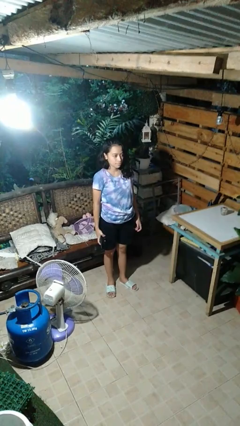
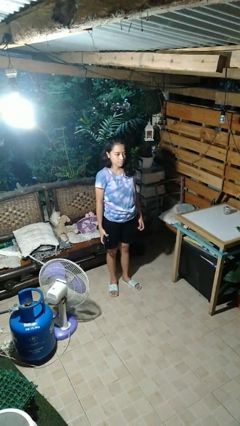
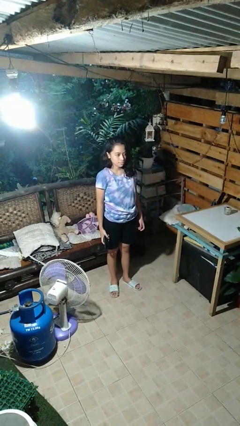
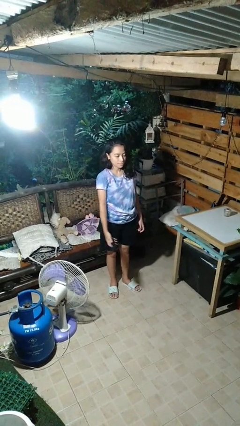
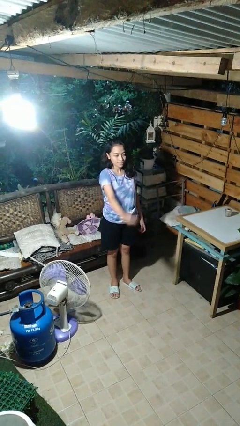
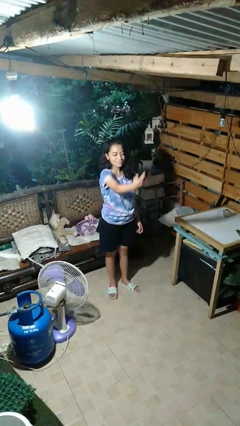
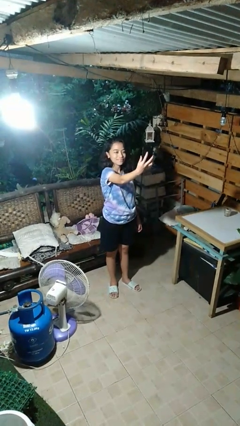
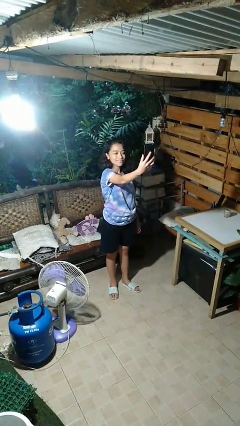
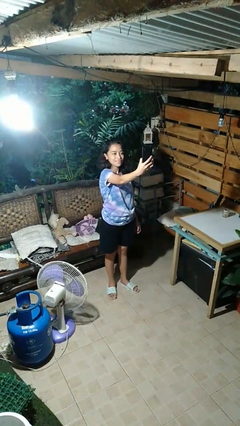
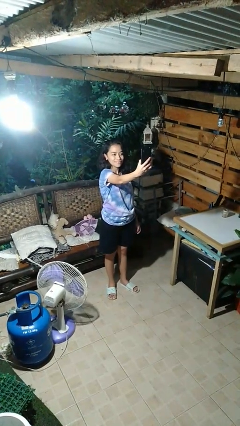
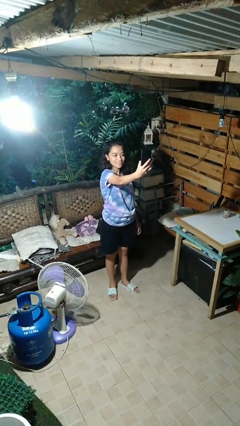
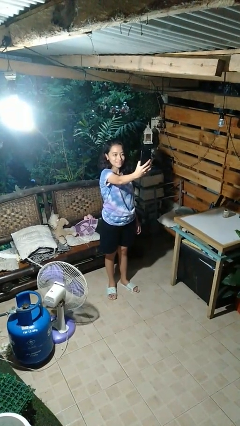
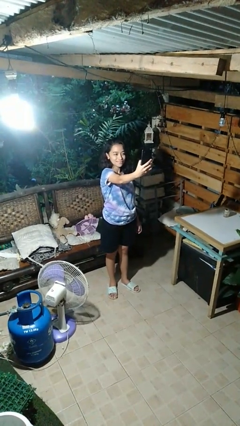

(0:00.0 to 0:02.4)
person takes selfie

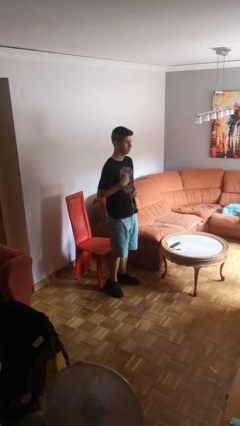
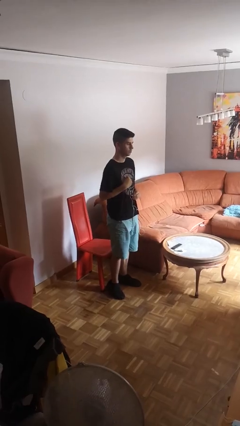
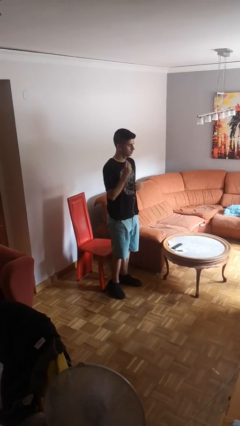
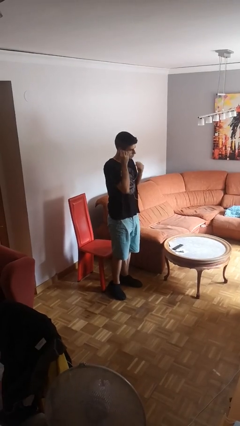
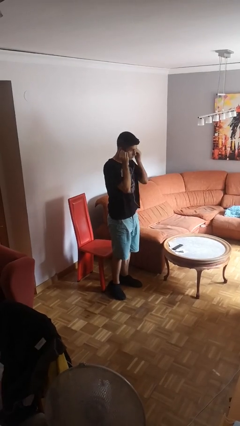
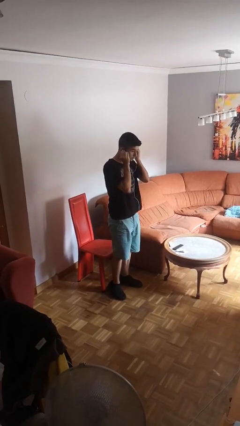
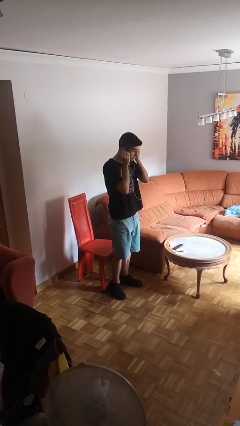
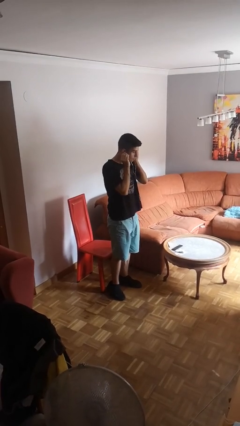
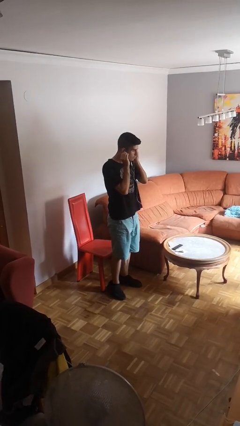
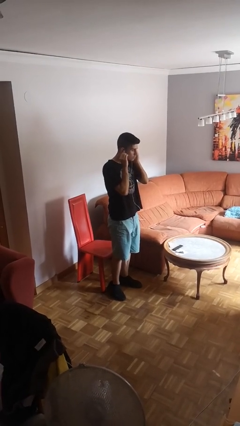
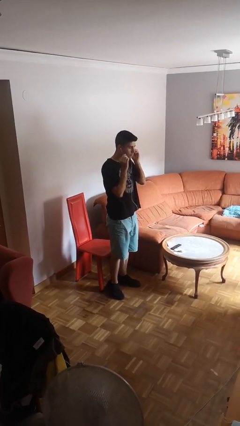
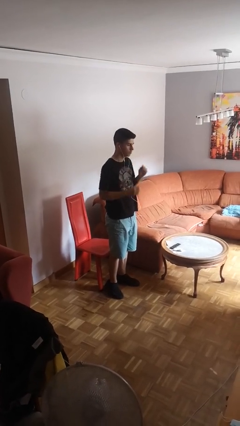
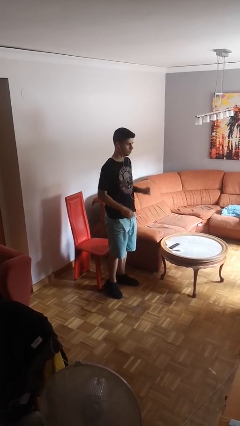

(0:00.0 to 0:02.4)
person puts on headphones

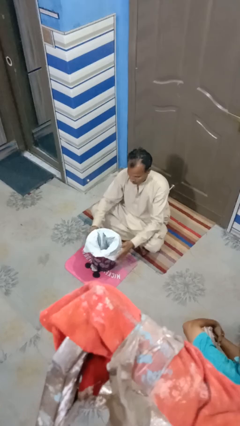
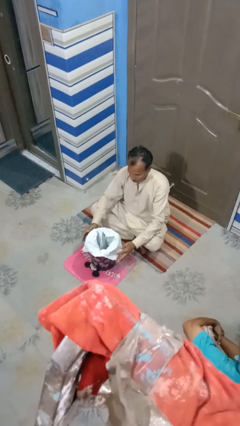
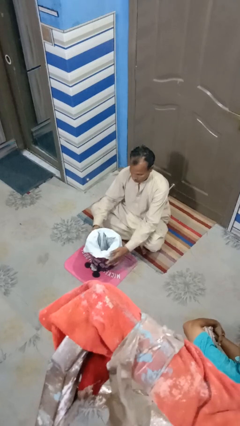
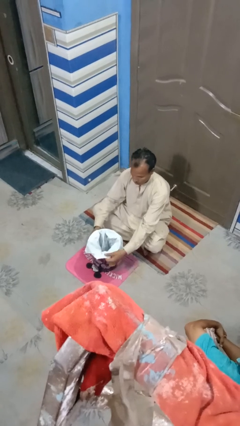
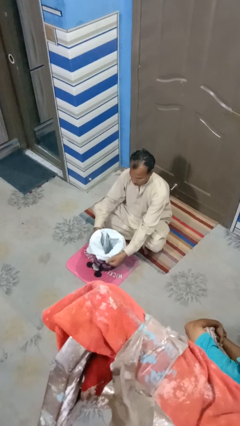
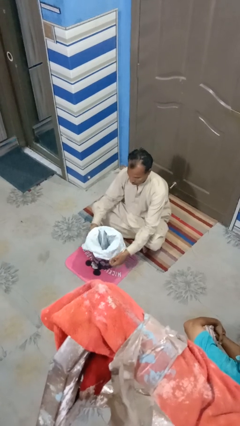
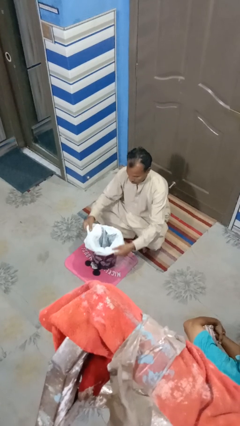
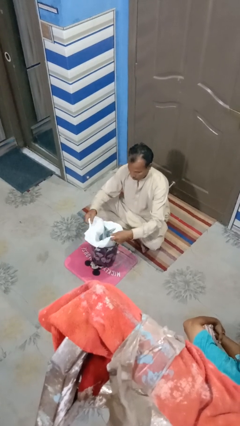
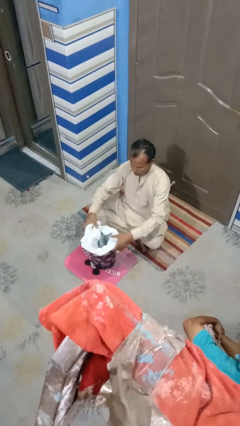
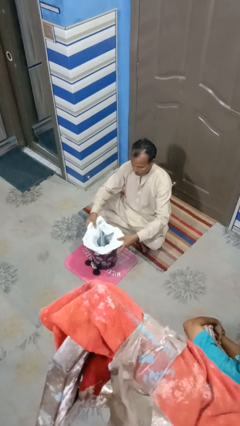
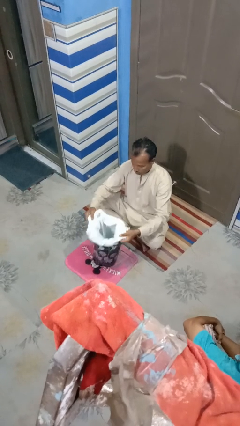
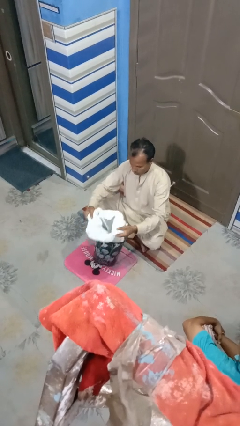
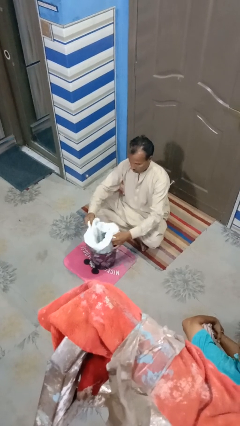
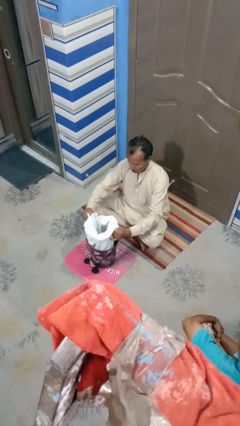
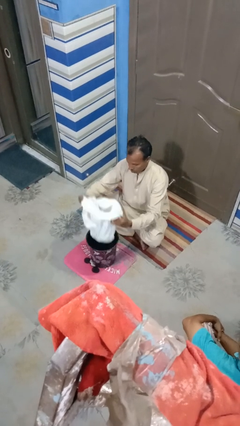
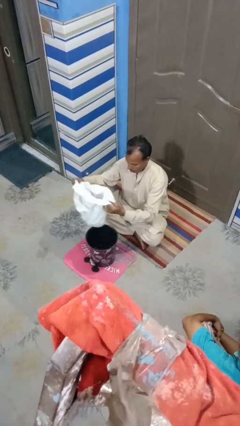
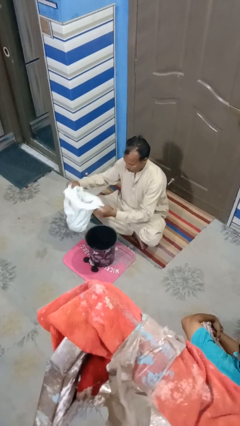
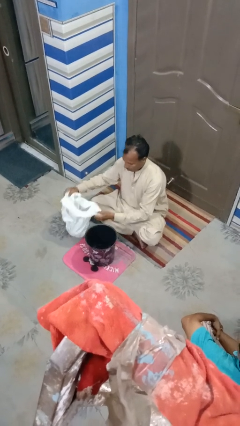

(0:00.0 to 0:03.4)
person inserts trashbag into trashcan

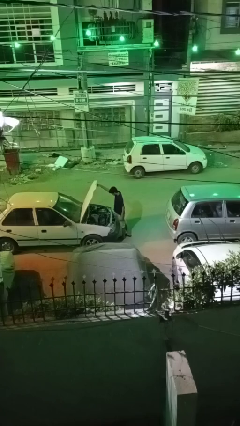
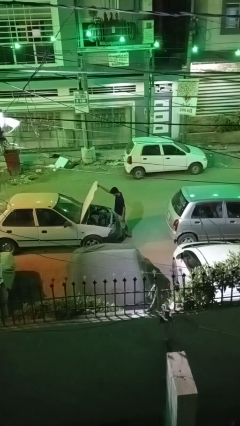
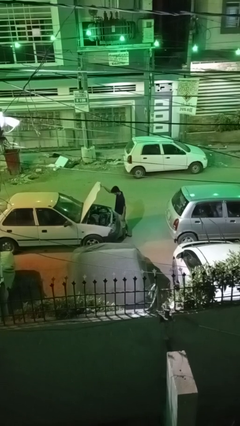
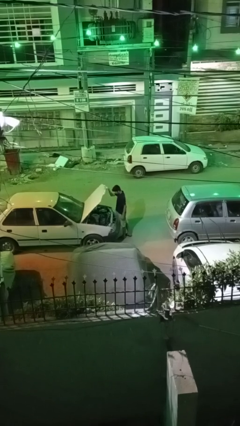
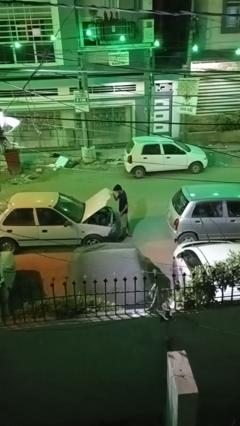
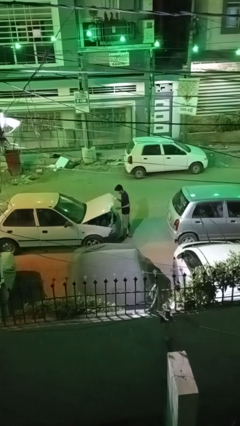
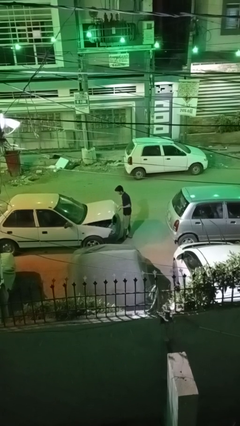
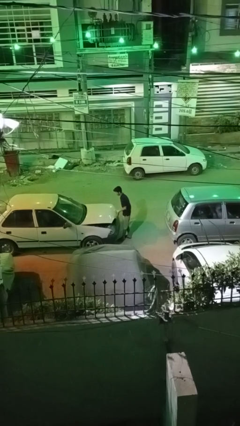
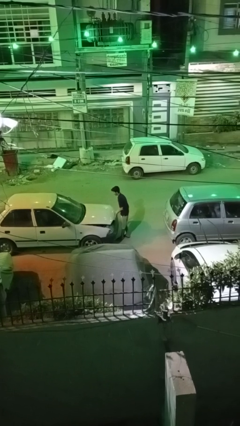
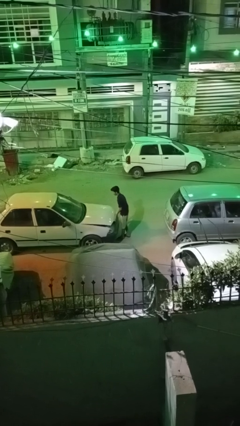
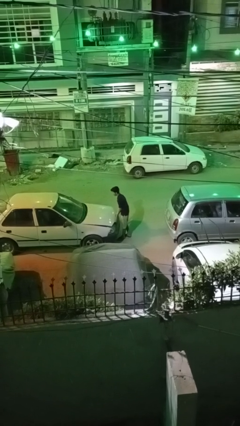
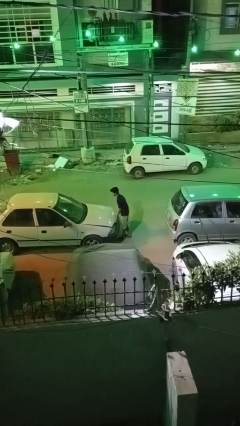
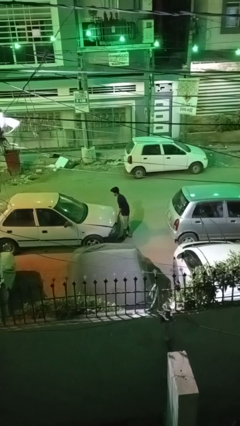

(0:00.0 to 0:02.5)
person closes car hood

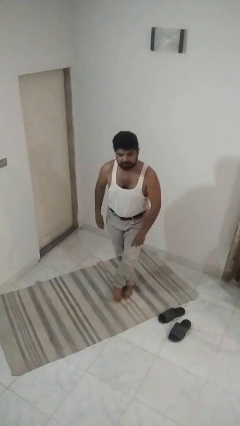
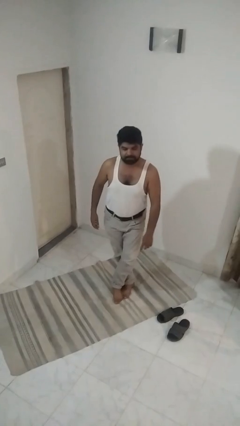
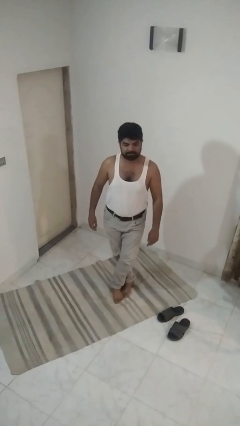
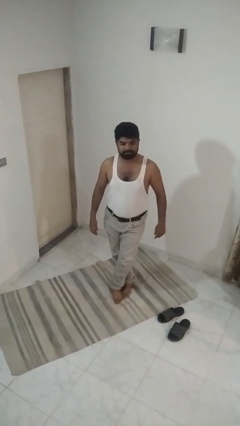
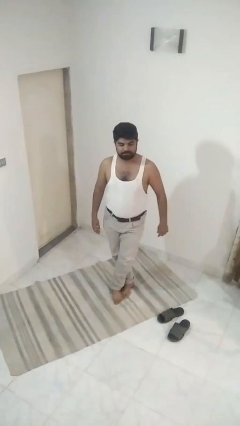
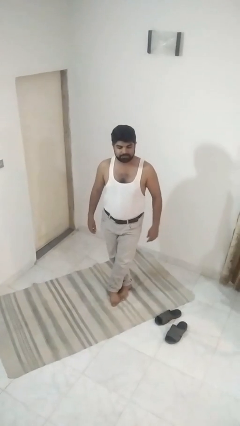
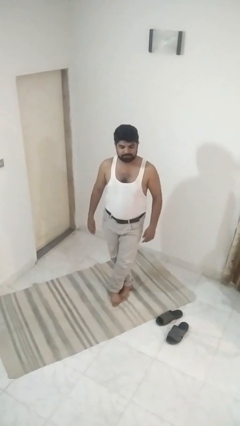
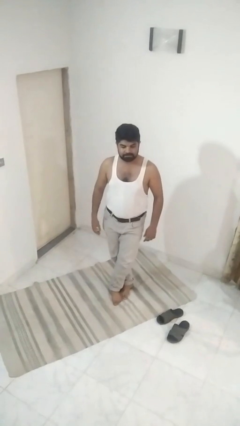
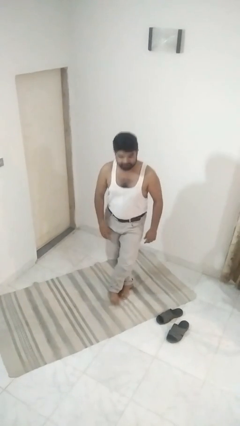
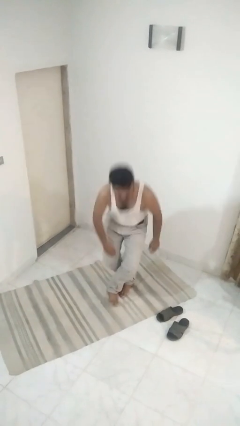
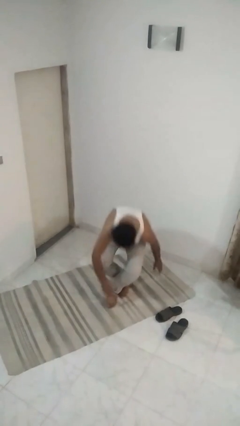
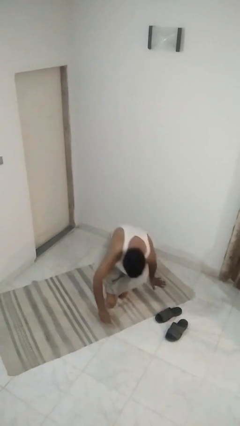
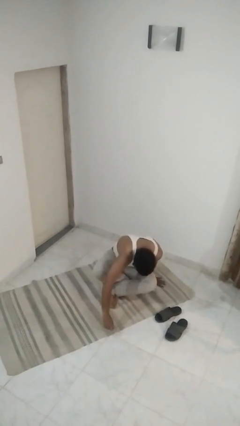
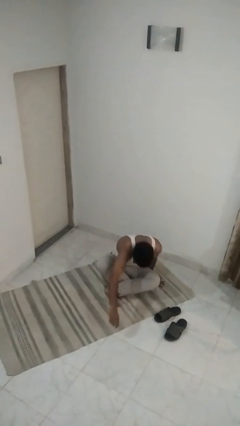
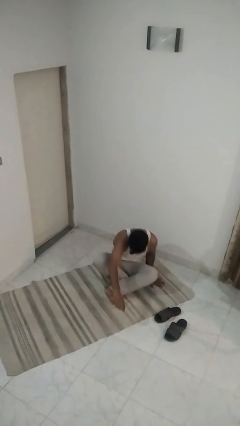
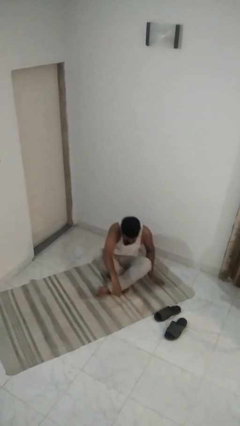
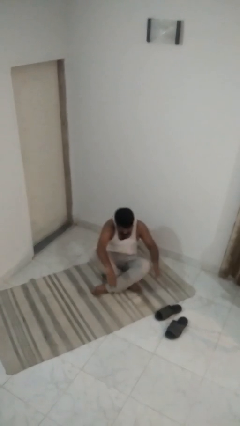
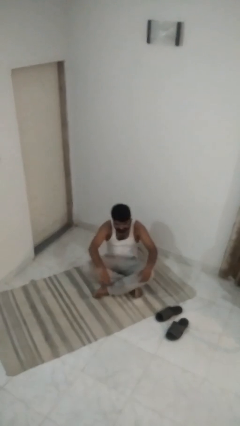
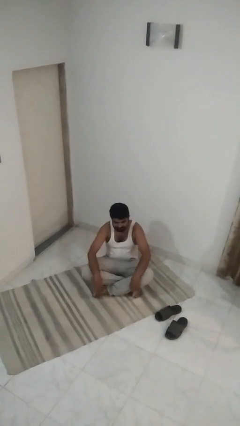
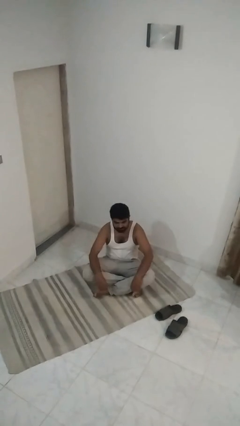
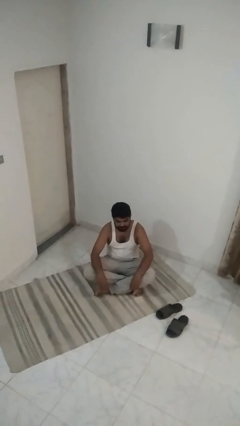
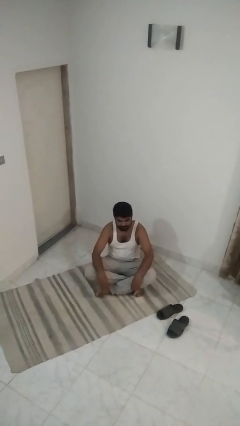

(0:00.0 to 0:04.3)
person sits crisscross

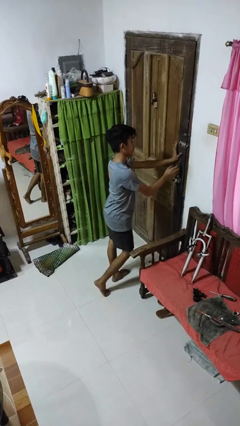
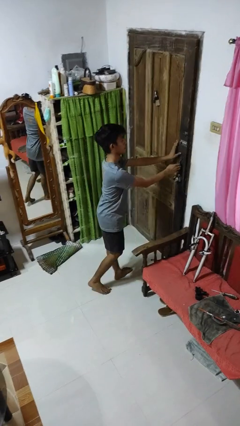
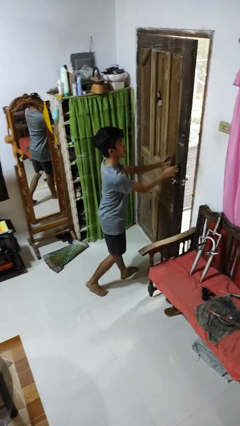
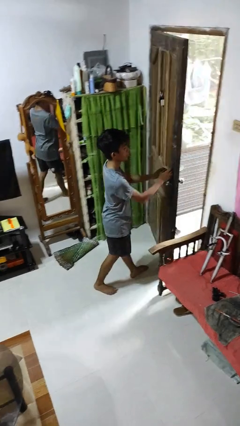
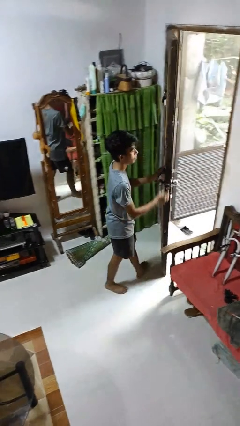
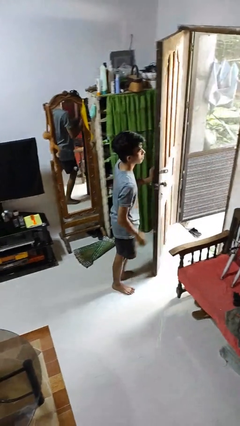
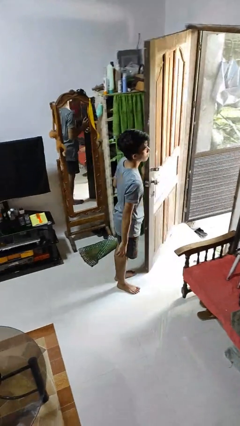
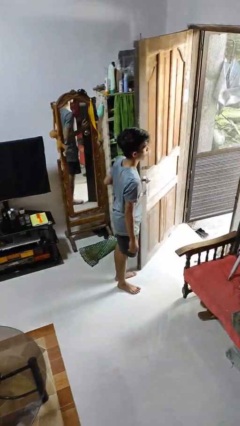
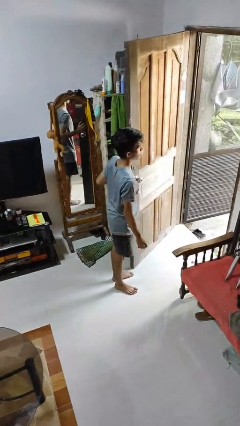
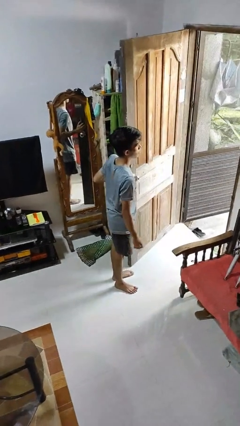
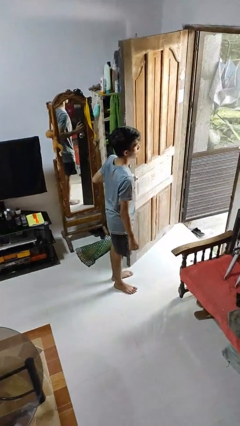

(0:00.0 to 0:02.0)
person opens facility door

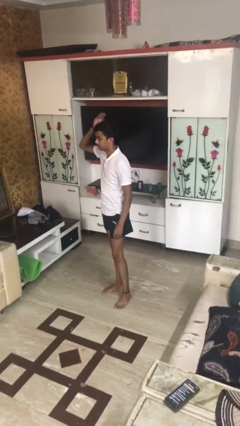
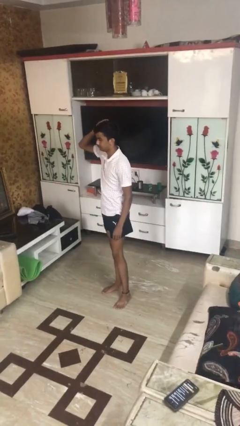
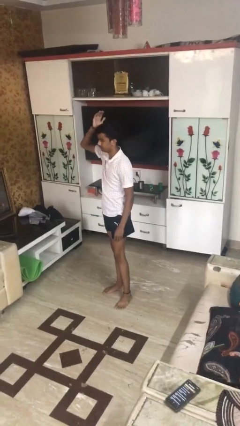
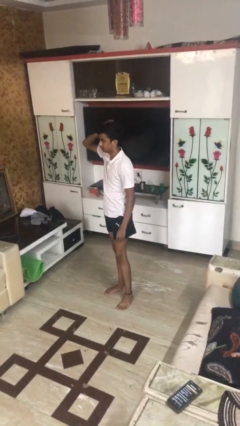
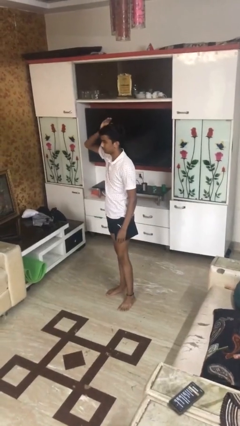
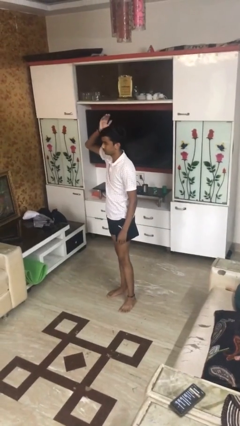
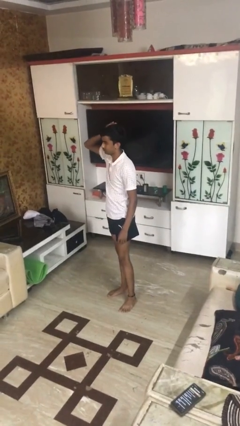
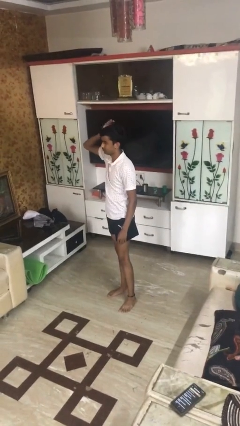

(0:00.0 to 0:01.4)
person pats head
